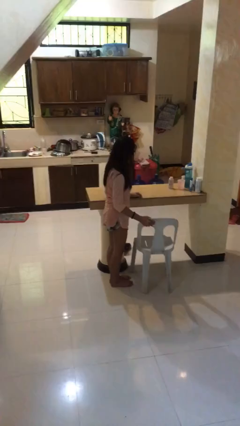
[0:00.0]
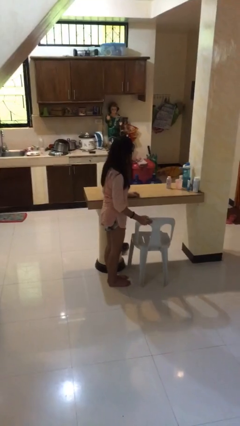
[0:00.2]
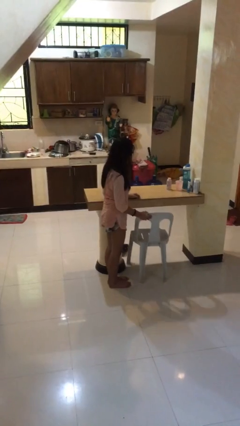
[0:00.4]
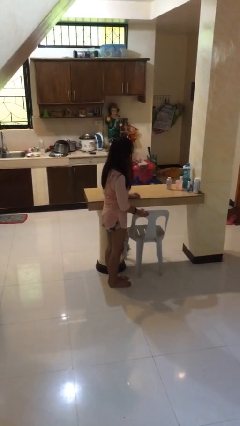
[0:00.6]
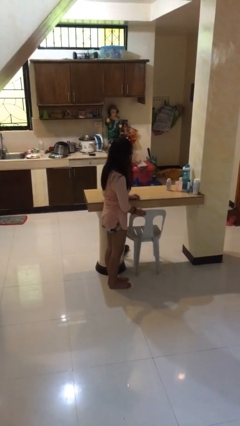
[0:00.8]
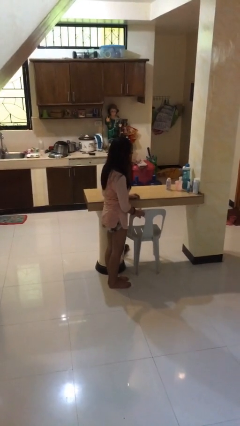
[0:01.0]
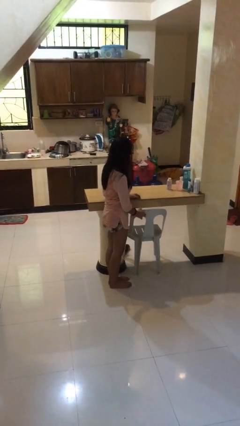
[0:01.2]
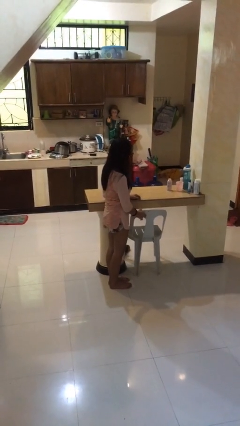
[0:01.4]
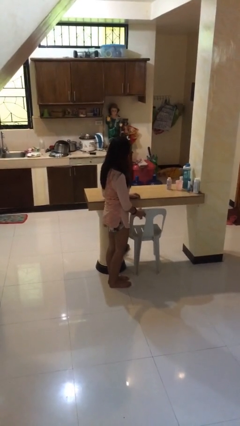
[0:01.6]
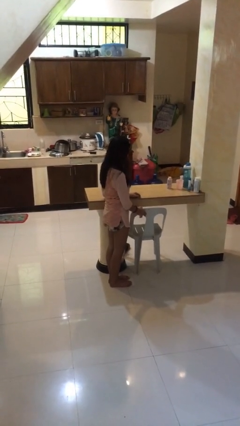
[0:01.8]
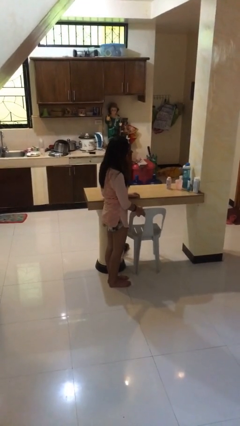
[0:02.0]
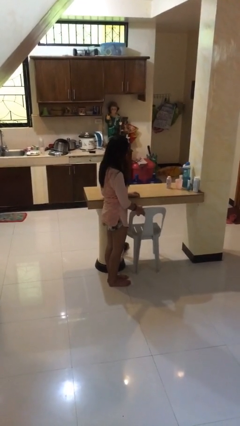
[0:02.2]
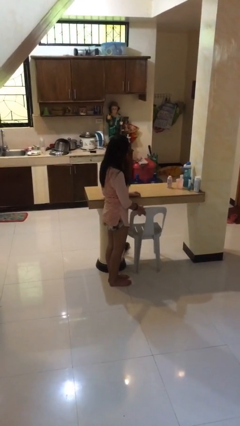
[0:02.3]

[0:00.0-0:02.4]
person pushes in chair

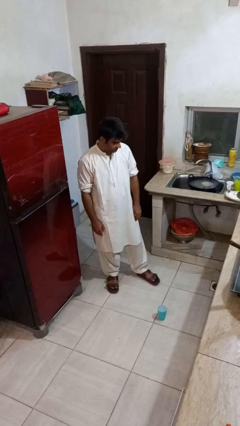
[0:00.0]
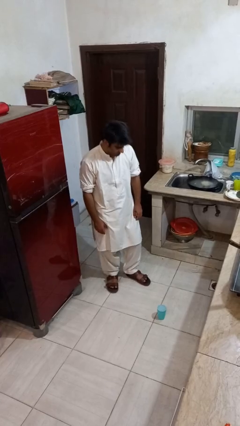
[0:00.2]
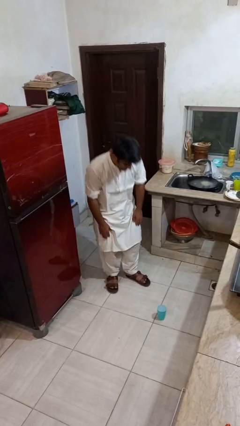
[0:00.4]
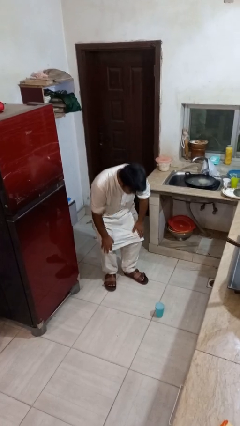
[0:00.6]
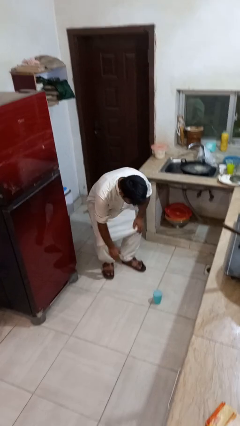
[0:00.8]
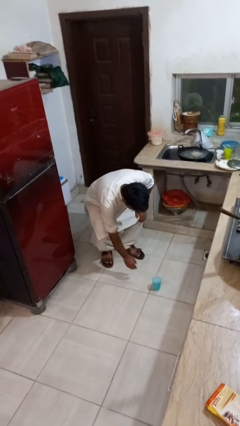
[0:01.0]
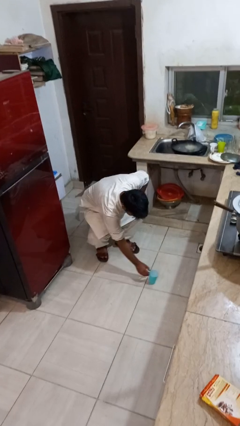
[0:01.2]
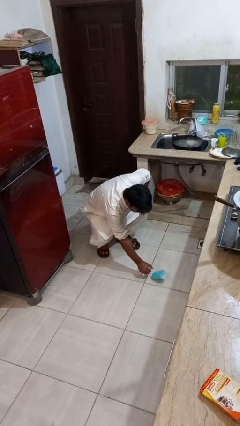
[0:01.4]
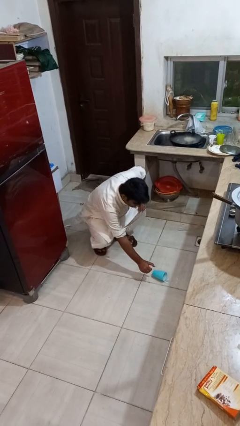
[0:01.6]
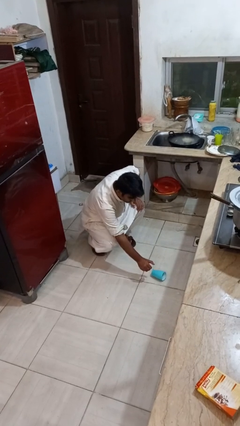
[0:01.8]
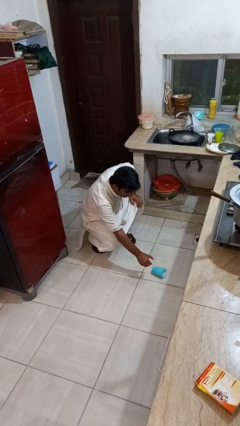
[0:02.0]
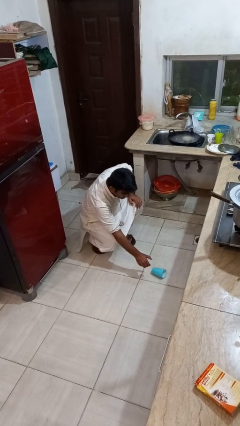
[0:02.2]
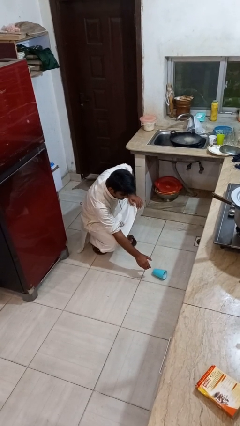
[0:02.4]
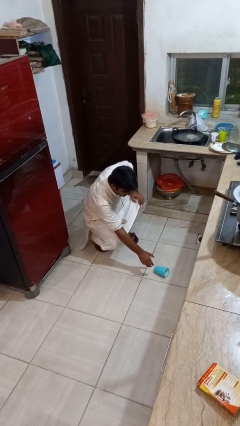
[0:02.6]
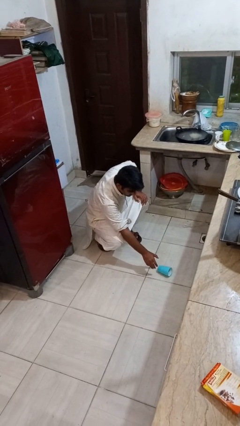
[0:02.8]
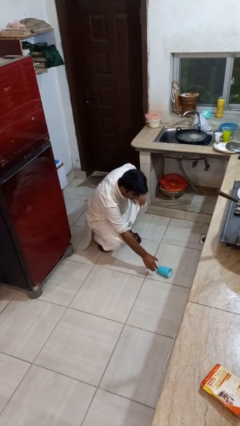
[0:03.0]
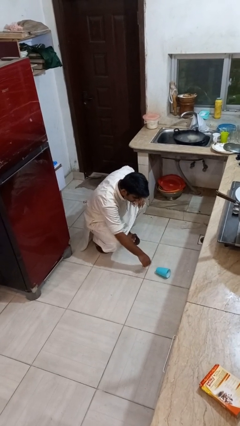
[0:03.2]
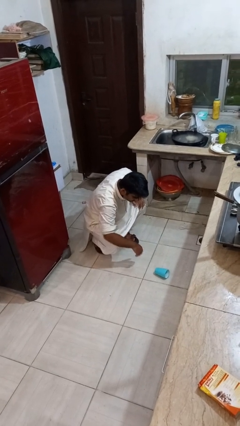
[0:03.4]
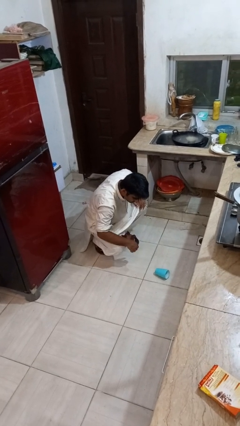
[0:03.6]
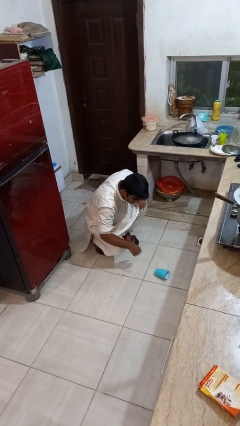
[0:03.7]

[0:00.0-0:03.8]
person spills on floor

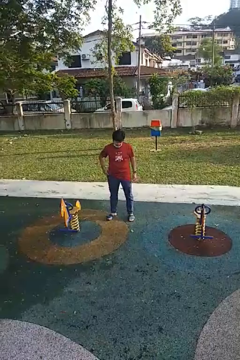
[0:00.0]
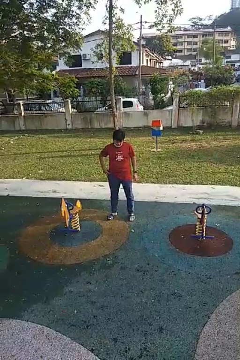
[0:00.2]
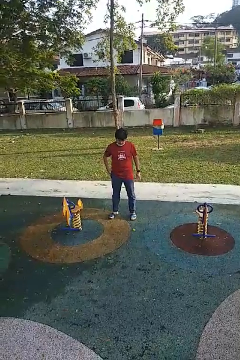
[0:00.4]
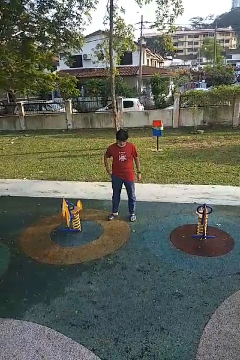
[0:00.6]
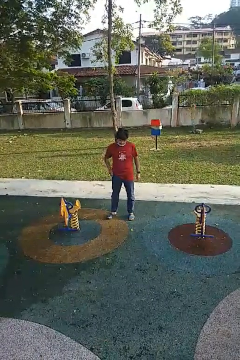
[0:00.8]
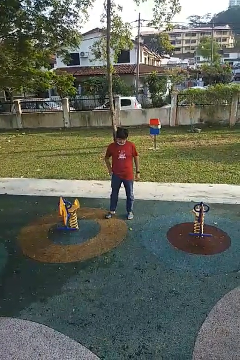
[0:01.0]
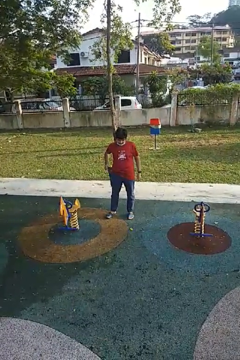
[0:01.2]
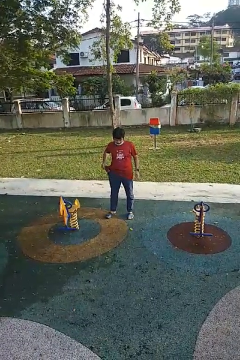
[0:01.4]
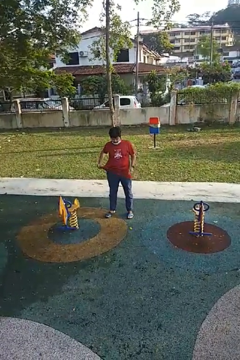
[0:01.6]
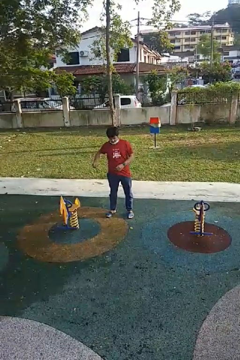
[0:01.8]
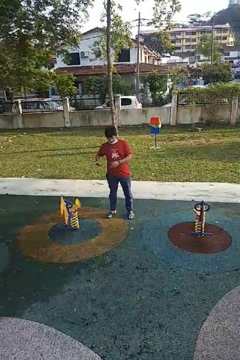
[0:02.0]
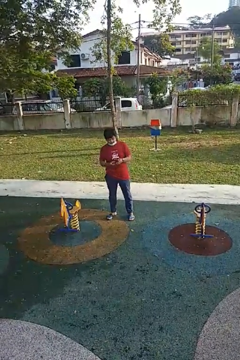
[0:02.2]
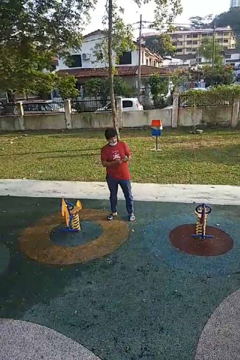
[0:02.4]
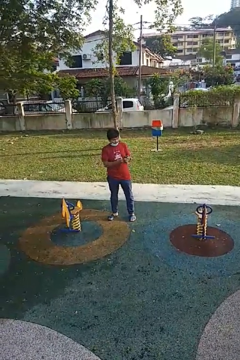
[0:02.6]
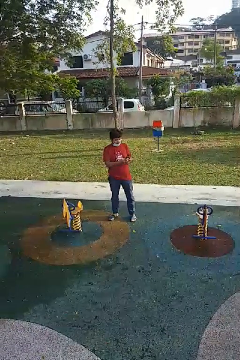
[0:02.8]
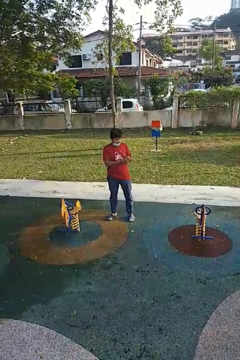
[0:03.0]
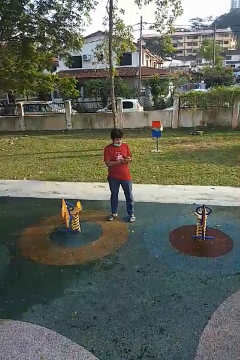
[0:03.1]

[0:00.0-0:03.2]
person takes phone from pocket

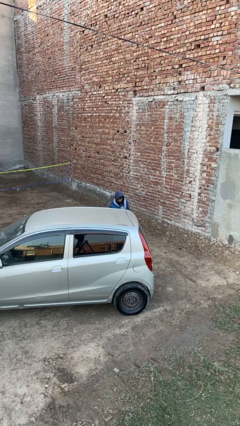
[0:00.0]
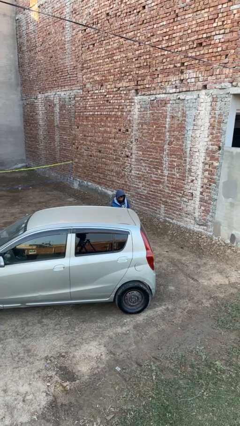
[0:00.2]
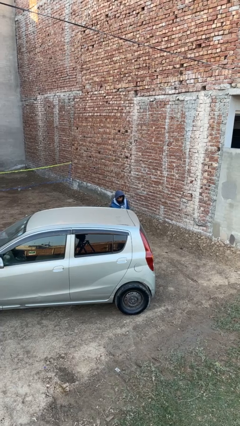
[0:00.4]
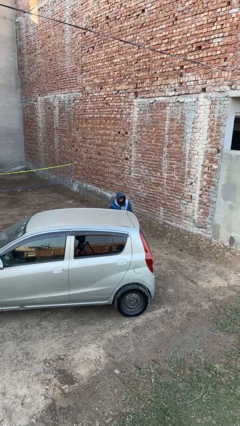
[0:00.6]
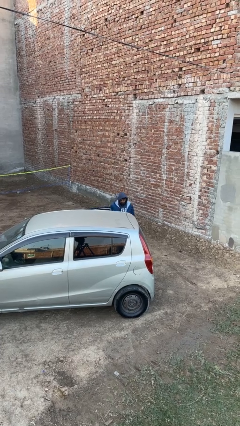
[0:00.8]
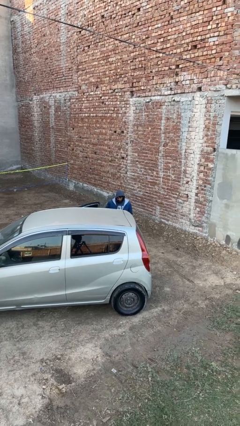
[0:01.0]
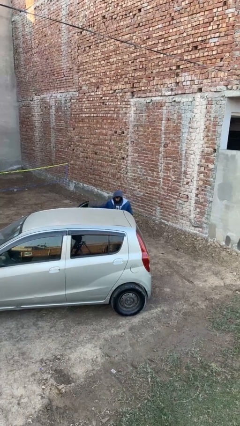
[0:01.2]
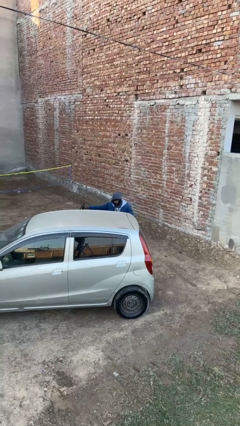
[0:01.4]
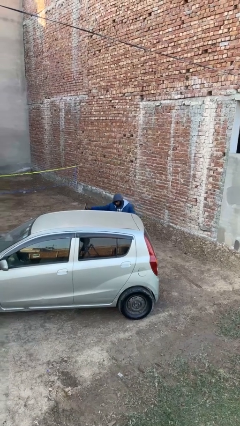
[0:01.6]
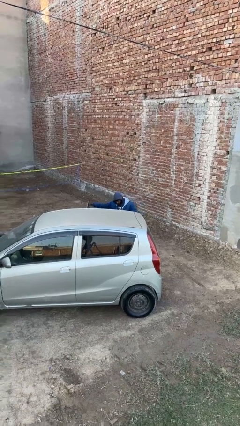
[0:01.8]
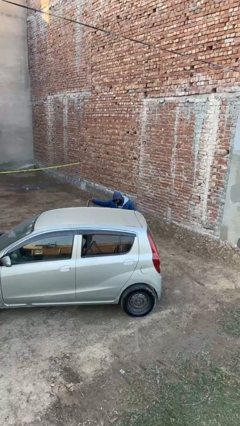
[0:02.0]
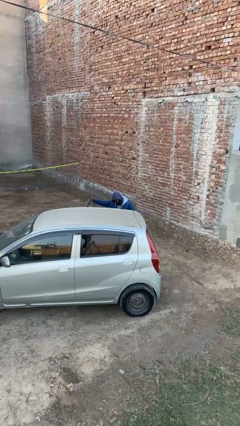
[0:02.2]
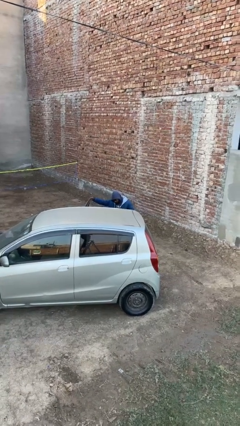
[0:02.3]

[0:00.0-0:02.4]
person opens car door

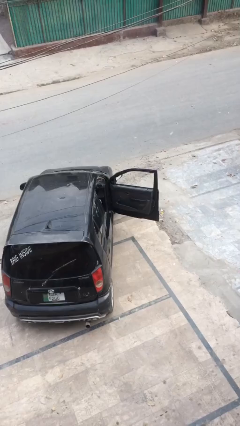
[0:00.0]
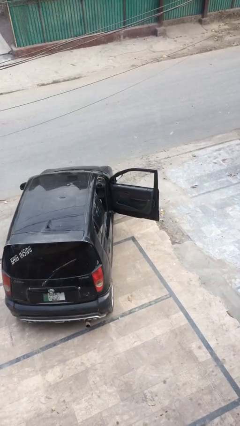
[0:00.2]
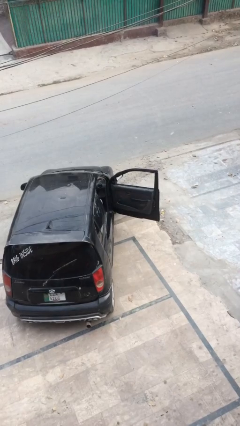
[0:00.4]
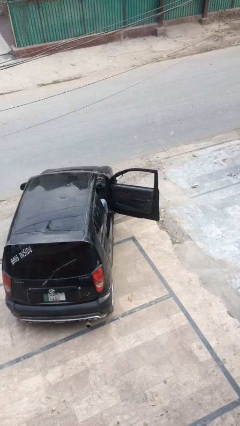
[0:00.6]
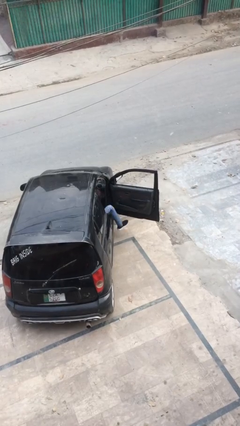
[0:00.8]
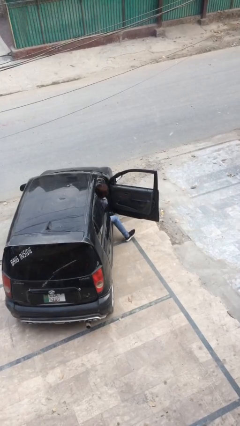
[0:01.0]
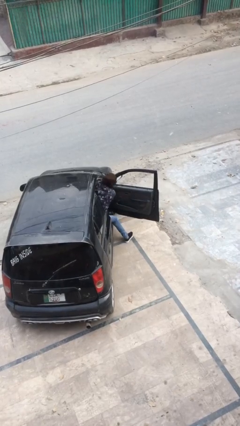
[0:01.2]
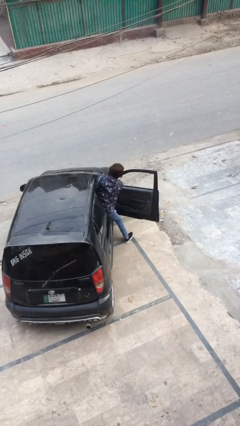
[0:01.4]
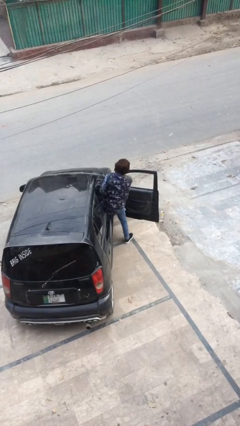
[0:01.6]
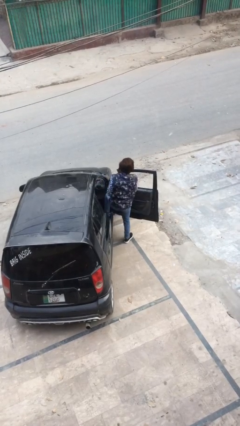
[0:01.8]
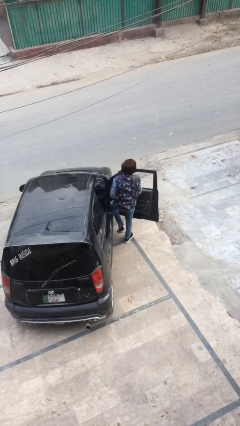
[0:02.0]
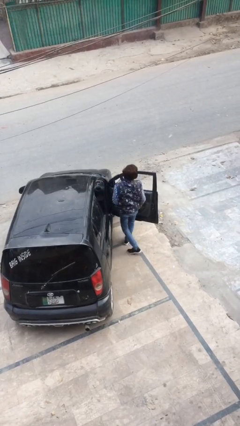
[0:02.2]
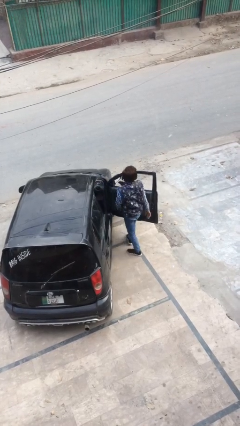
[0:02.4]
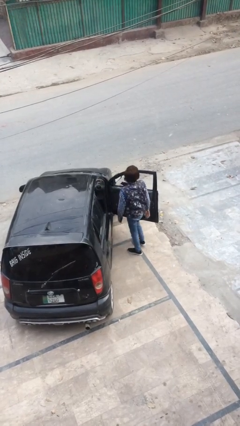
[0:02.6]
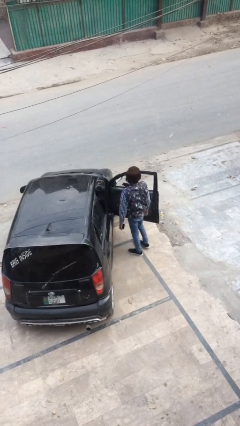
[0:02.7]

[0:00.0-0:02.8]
person exits car

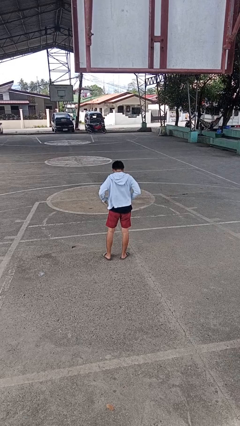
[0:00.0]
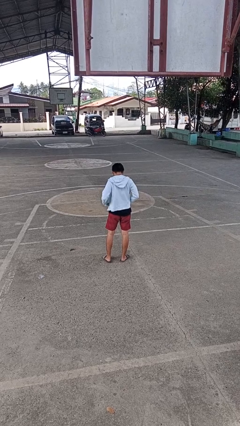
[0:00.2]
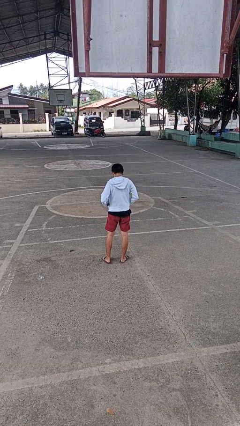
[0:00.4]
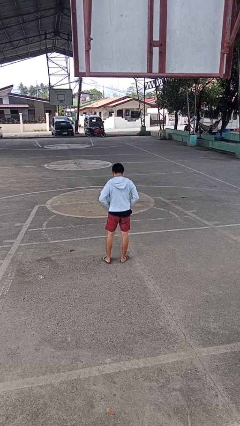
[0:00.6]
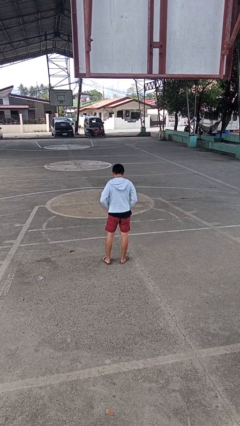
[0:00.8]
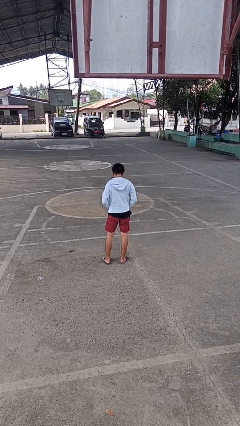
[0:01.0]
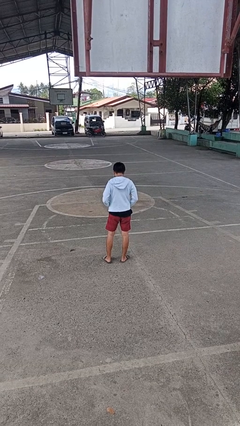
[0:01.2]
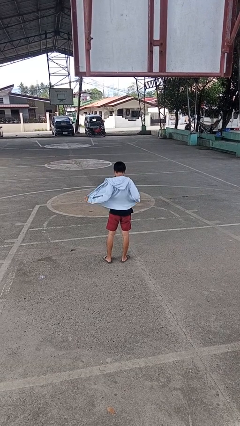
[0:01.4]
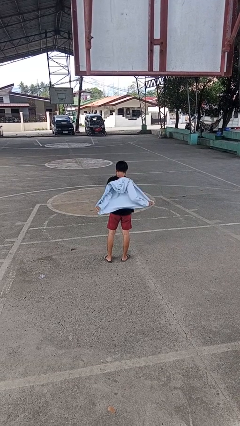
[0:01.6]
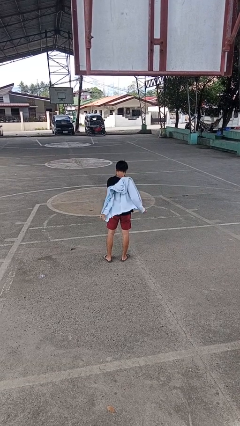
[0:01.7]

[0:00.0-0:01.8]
person unzips jacket

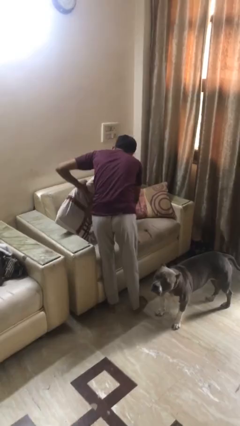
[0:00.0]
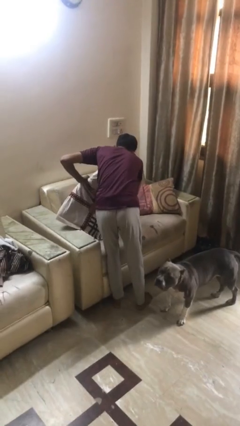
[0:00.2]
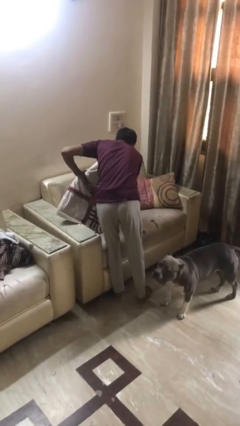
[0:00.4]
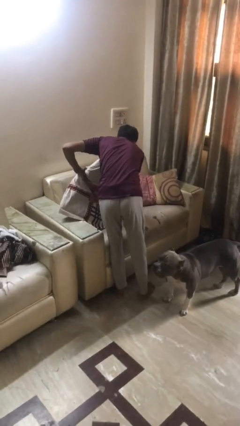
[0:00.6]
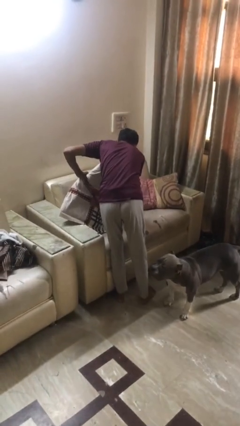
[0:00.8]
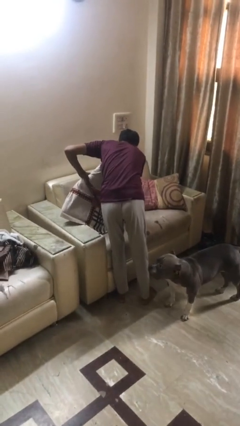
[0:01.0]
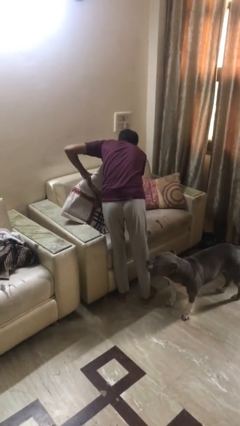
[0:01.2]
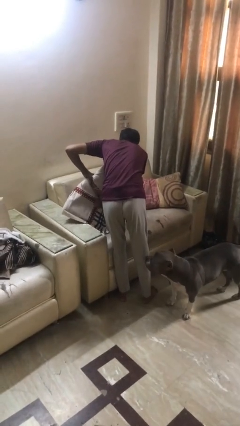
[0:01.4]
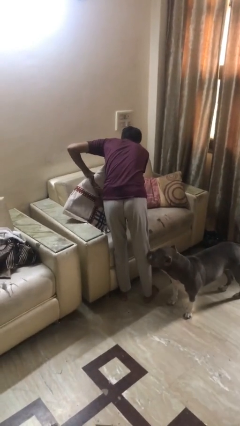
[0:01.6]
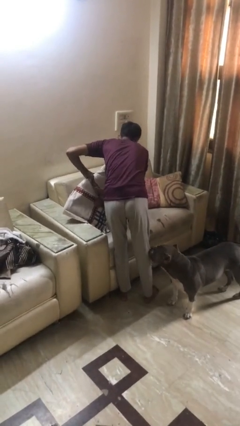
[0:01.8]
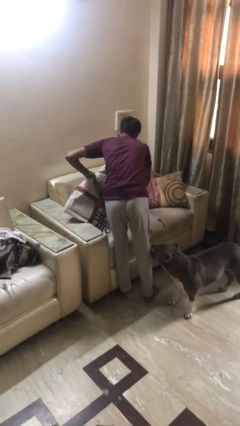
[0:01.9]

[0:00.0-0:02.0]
person searches in couch
